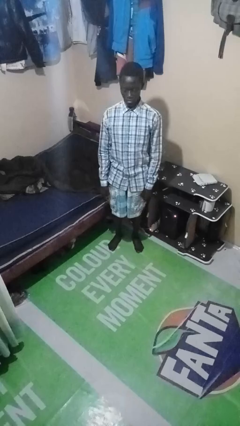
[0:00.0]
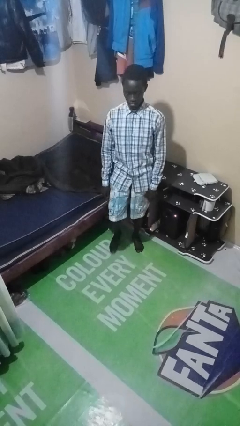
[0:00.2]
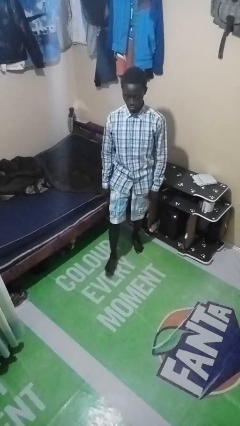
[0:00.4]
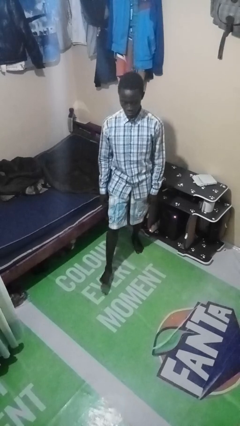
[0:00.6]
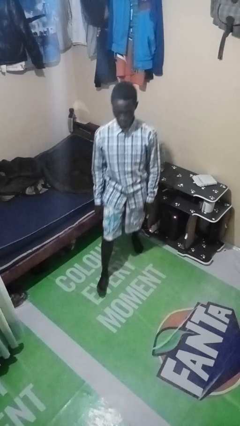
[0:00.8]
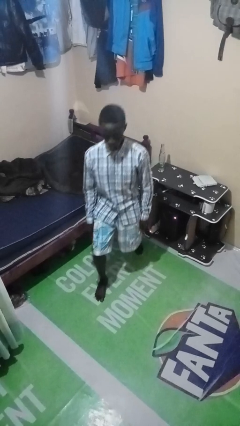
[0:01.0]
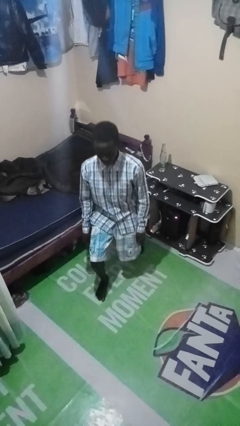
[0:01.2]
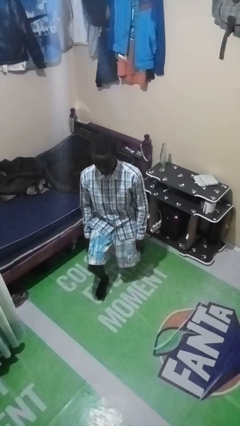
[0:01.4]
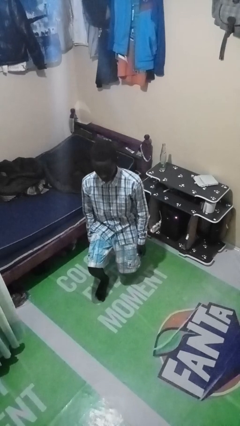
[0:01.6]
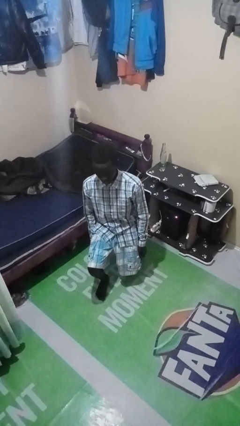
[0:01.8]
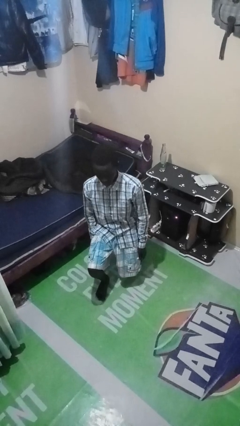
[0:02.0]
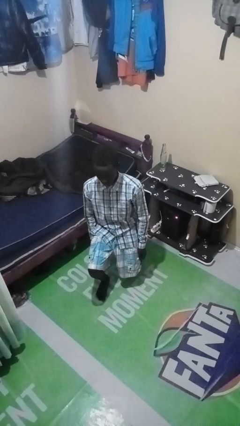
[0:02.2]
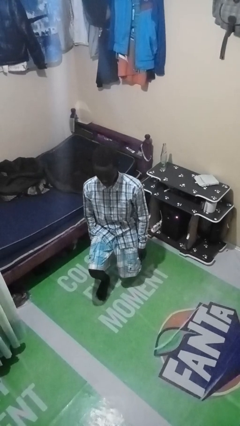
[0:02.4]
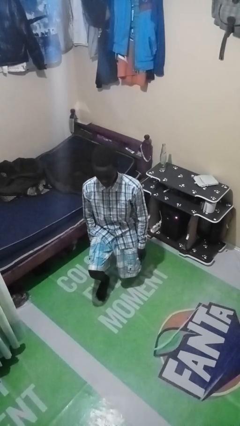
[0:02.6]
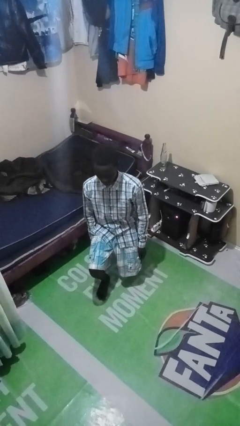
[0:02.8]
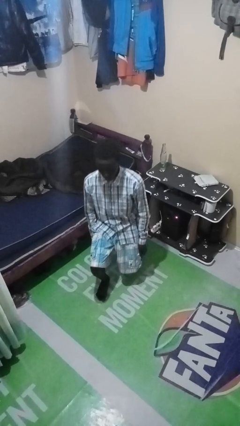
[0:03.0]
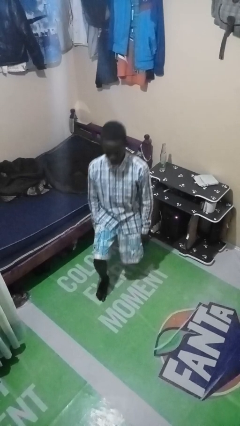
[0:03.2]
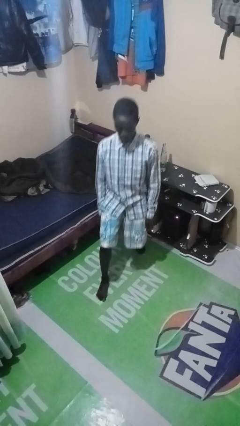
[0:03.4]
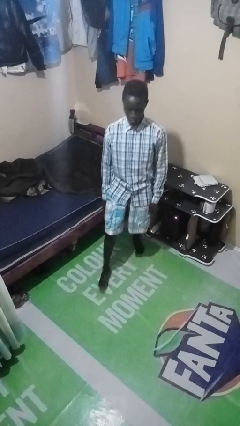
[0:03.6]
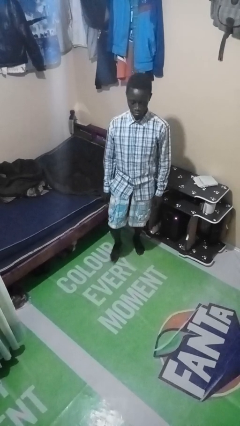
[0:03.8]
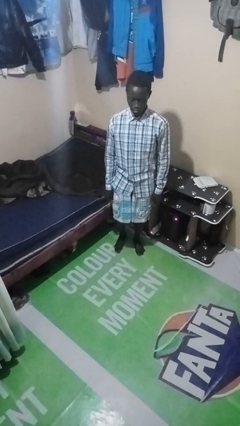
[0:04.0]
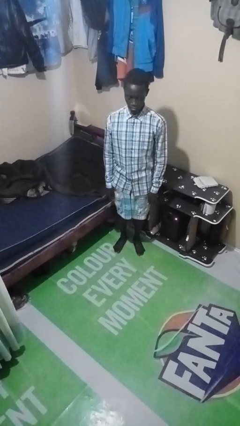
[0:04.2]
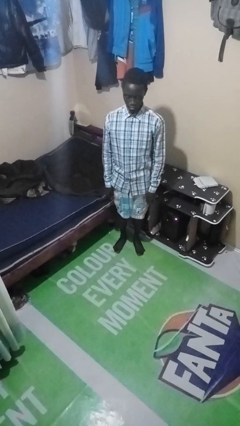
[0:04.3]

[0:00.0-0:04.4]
person exercises with lunges

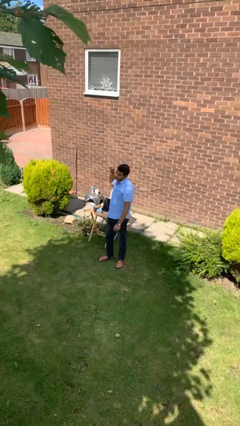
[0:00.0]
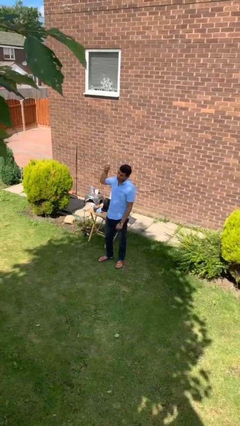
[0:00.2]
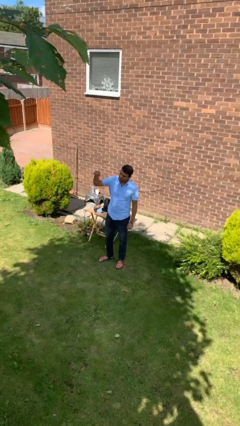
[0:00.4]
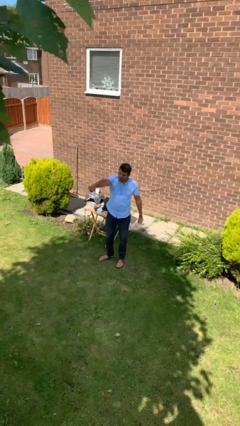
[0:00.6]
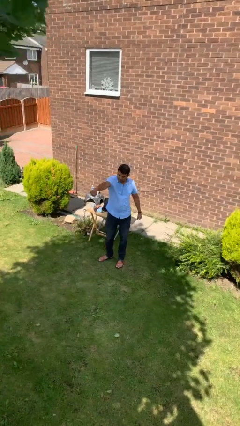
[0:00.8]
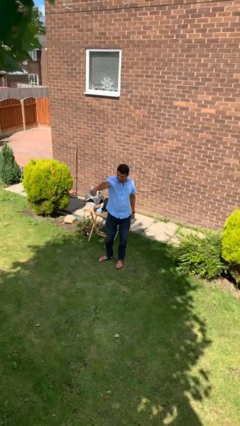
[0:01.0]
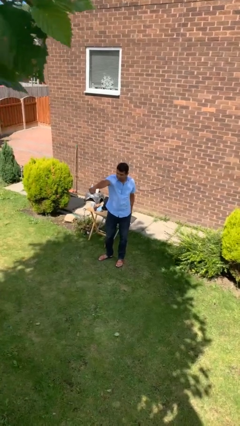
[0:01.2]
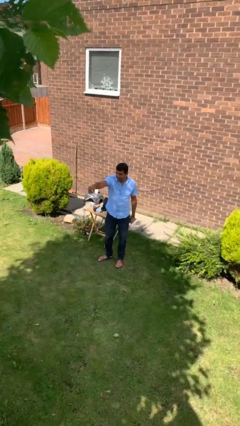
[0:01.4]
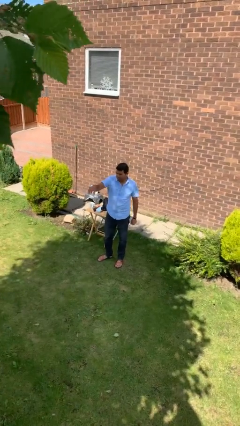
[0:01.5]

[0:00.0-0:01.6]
person punches

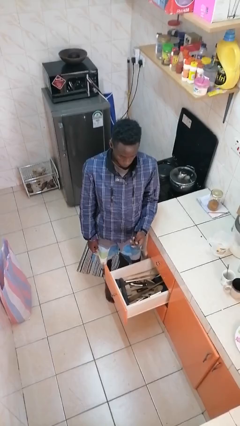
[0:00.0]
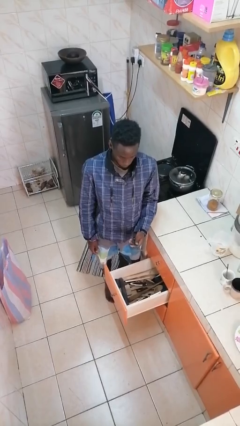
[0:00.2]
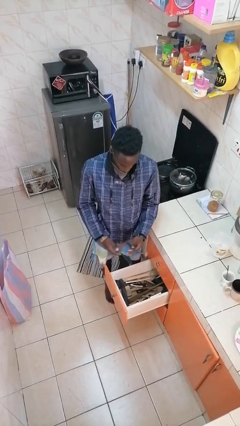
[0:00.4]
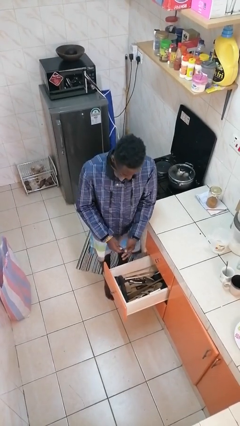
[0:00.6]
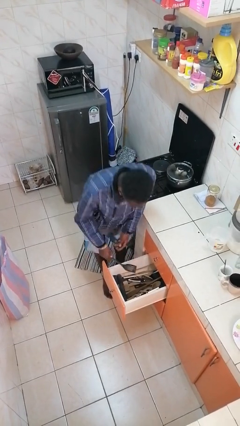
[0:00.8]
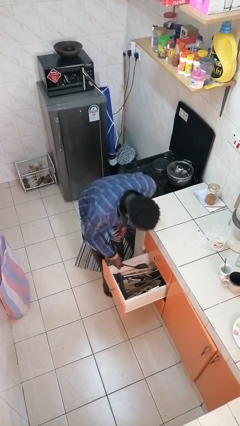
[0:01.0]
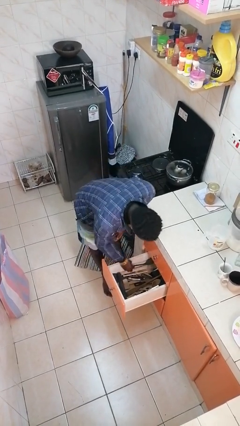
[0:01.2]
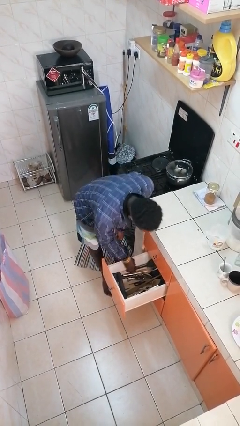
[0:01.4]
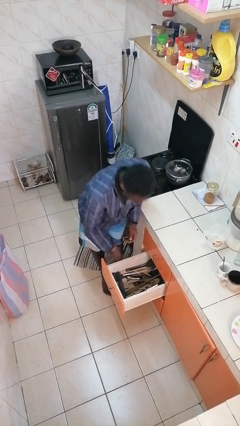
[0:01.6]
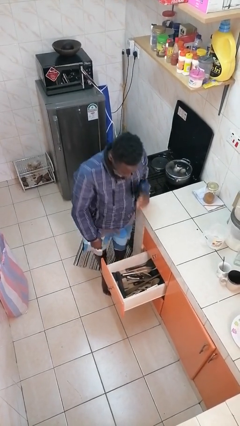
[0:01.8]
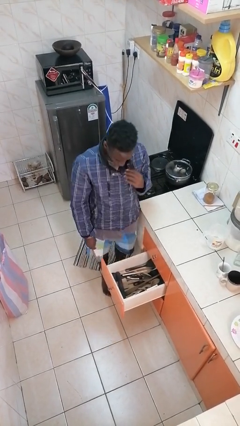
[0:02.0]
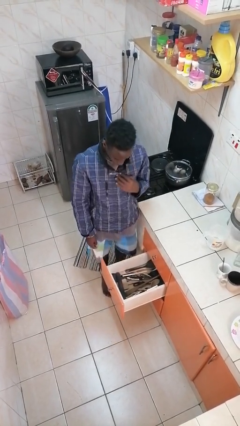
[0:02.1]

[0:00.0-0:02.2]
person puts object into kitchen drawer

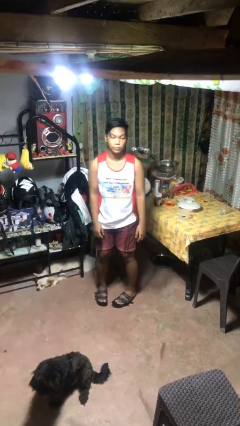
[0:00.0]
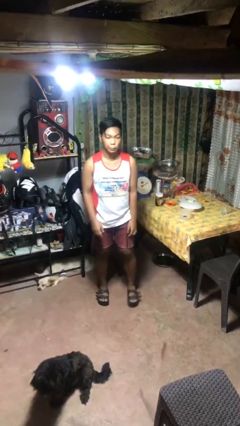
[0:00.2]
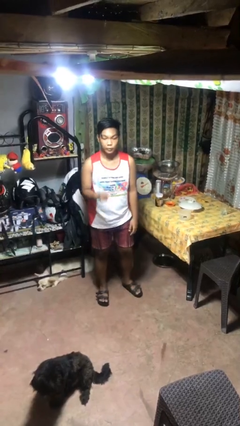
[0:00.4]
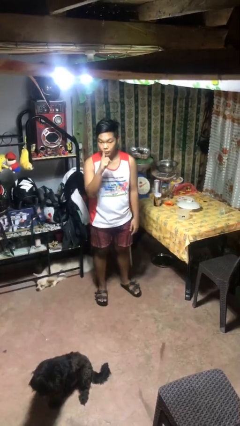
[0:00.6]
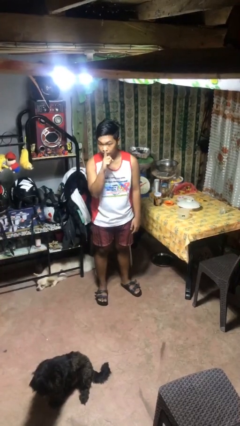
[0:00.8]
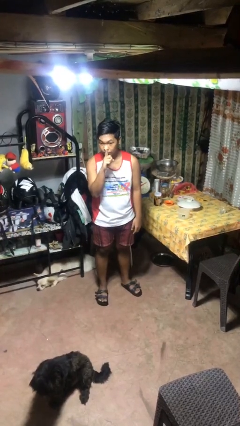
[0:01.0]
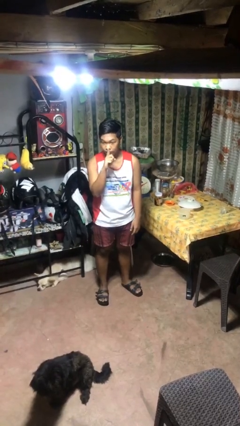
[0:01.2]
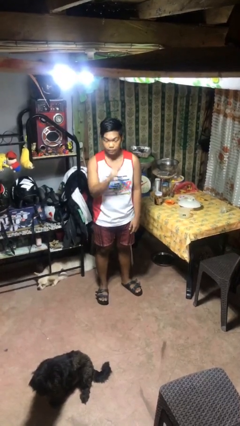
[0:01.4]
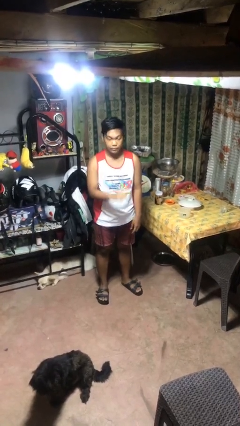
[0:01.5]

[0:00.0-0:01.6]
person gestures be quiet

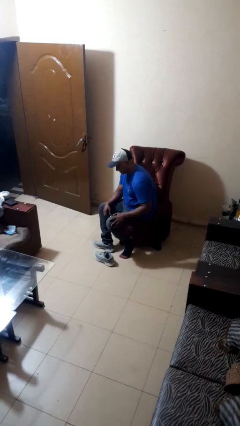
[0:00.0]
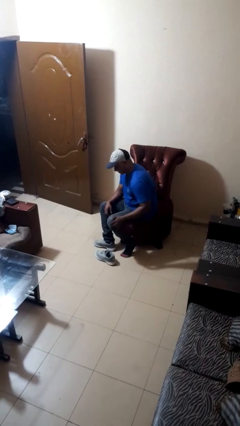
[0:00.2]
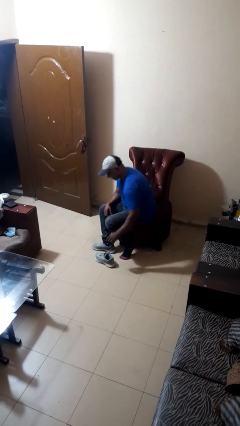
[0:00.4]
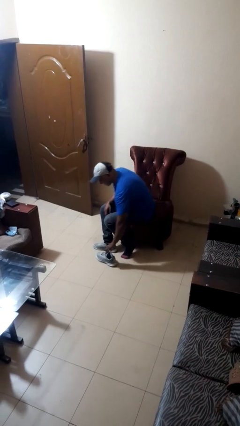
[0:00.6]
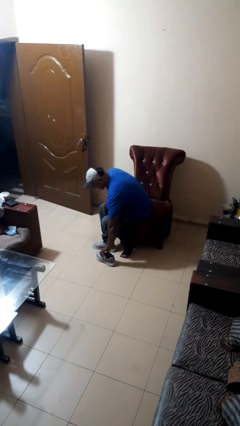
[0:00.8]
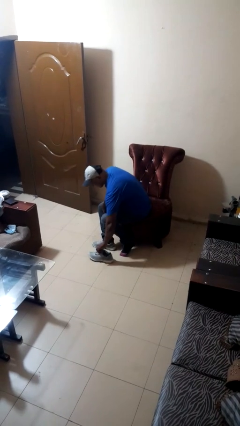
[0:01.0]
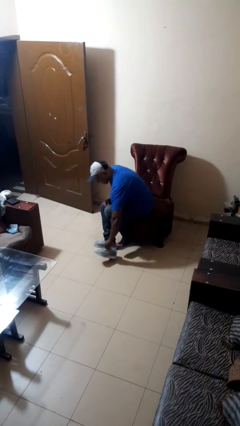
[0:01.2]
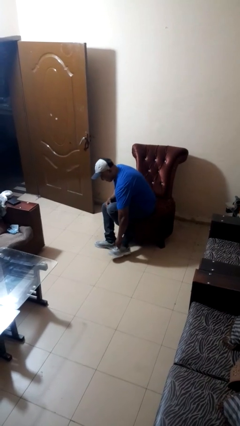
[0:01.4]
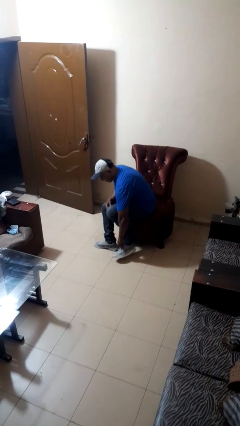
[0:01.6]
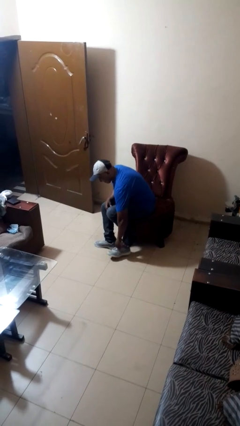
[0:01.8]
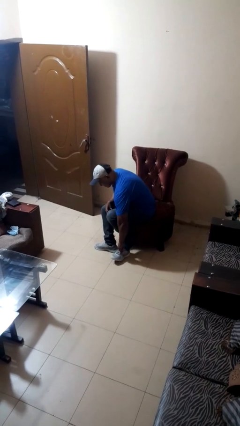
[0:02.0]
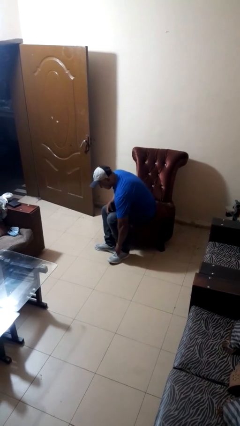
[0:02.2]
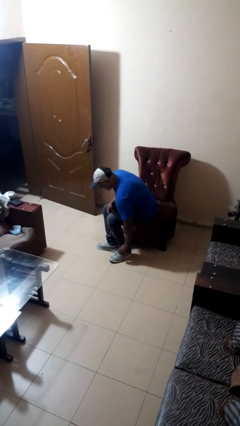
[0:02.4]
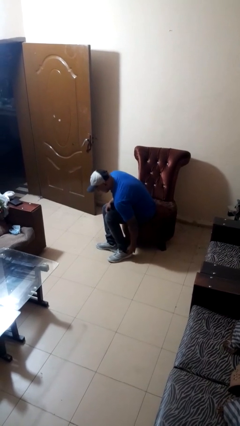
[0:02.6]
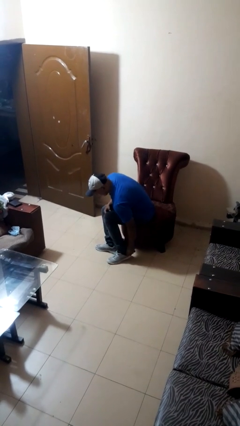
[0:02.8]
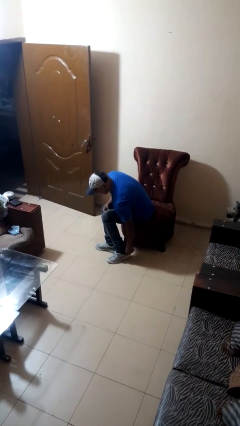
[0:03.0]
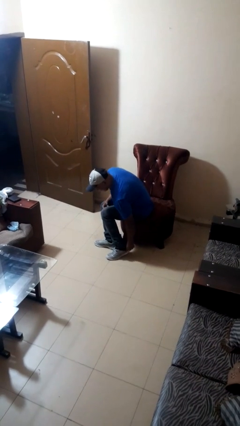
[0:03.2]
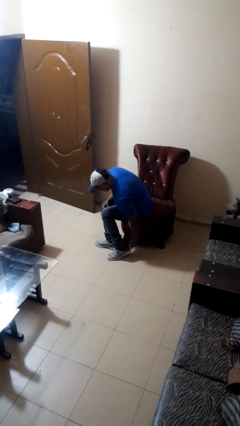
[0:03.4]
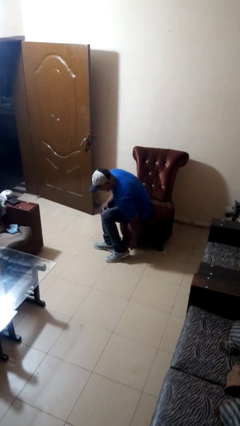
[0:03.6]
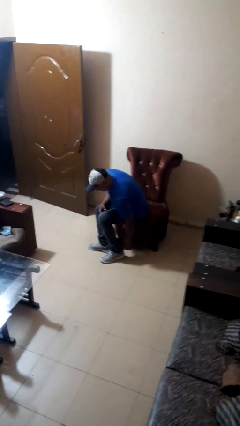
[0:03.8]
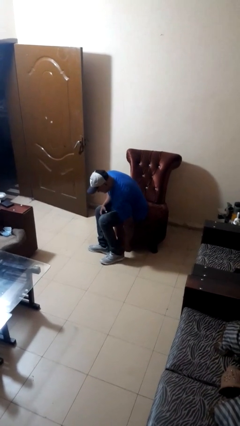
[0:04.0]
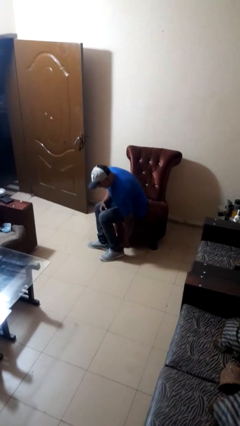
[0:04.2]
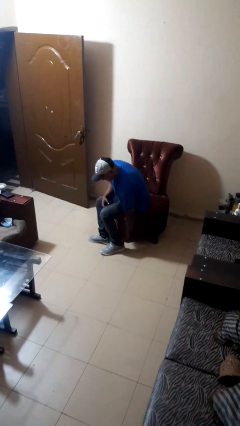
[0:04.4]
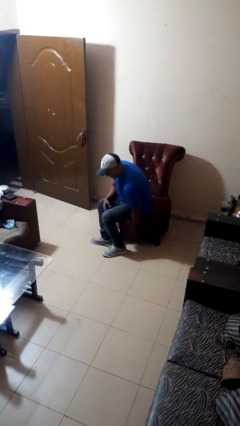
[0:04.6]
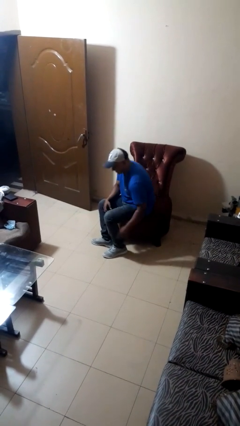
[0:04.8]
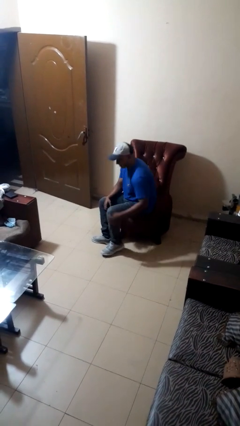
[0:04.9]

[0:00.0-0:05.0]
person puts on boots

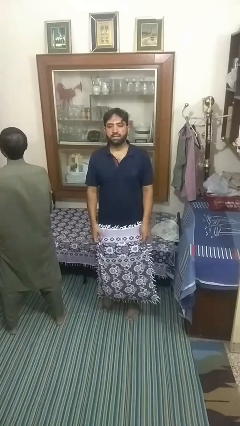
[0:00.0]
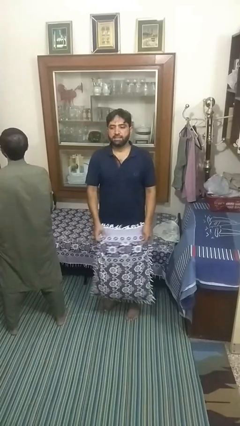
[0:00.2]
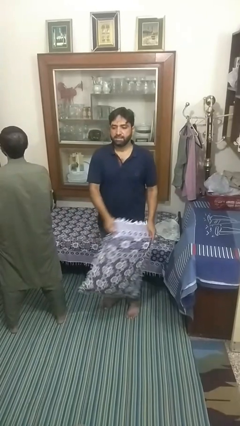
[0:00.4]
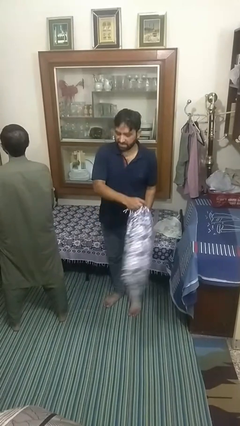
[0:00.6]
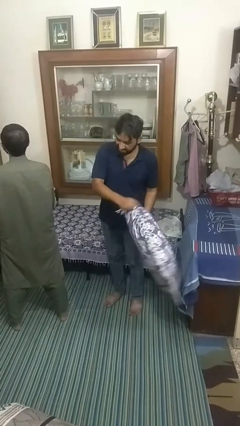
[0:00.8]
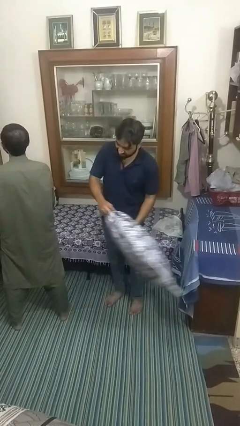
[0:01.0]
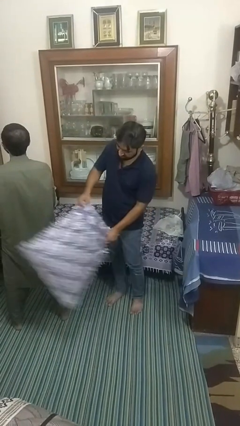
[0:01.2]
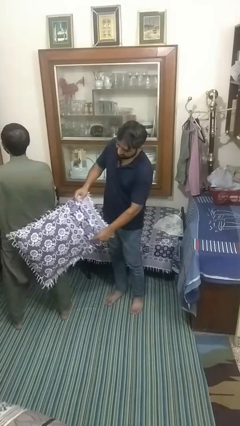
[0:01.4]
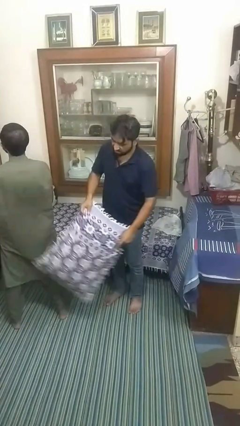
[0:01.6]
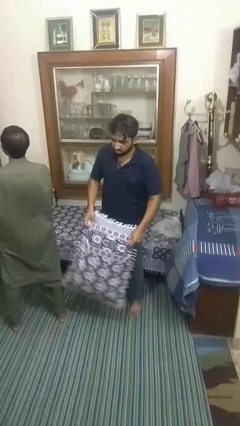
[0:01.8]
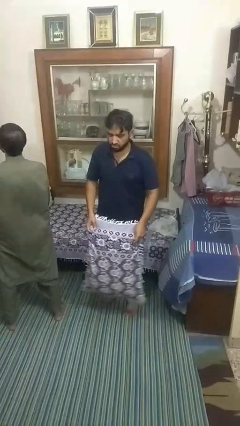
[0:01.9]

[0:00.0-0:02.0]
person hits person with pillow

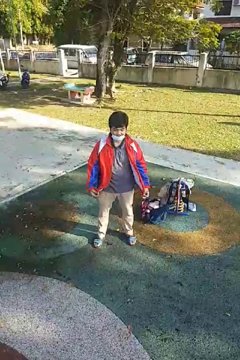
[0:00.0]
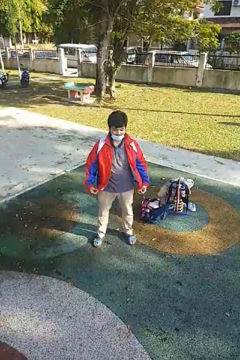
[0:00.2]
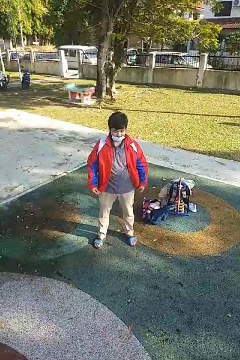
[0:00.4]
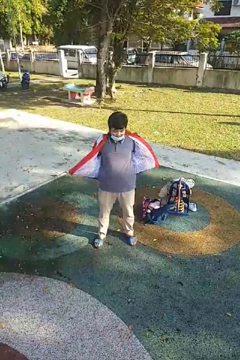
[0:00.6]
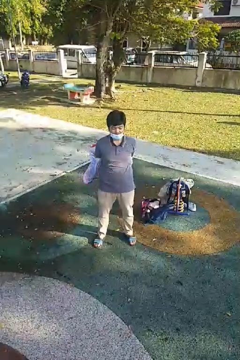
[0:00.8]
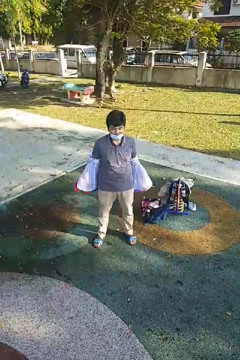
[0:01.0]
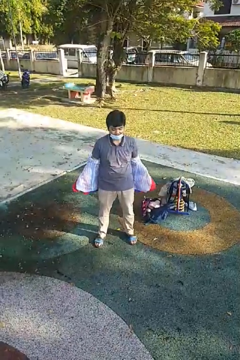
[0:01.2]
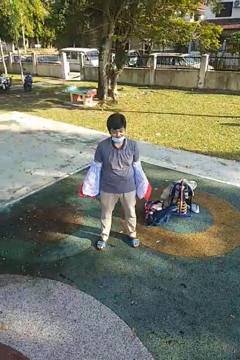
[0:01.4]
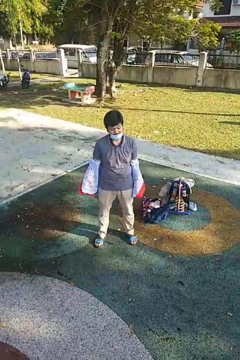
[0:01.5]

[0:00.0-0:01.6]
person takes off jacket
